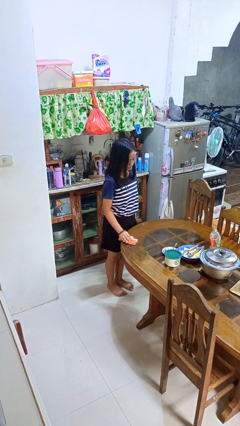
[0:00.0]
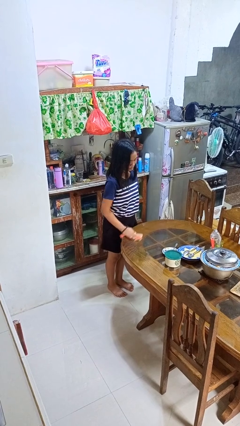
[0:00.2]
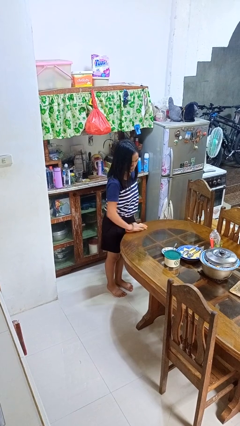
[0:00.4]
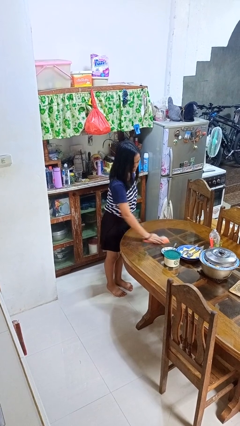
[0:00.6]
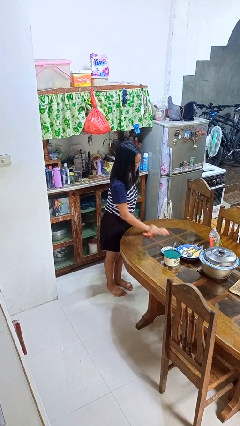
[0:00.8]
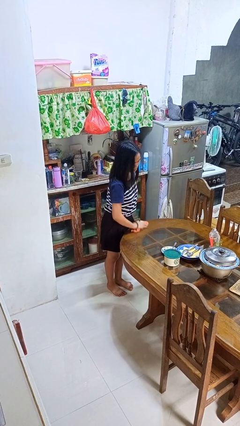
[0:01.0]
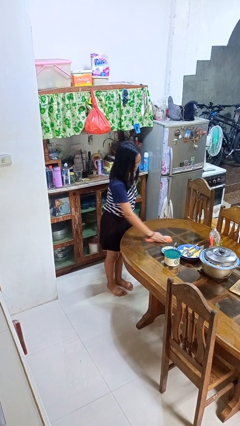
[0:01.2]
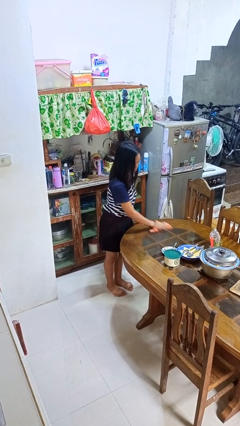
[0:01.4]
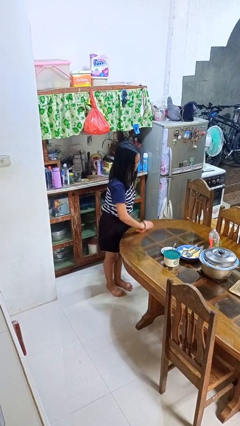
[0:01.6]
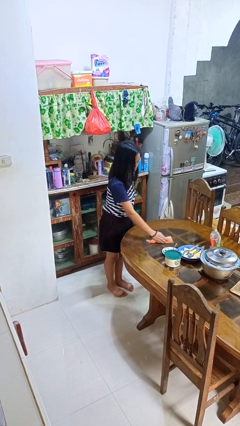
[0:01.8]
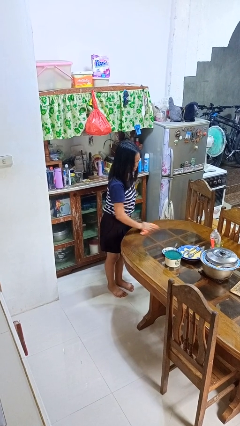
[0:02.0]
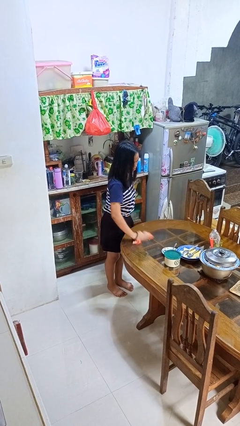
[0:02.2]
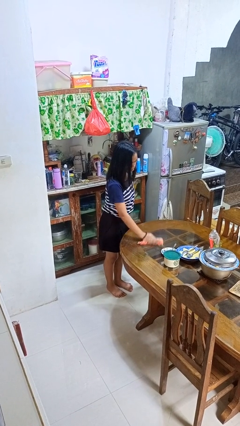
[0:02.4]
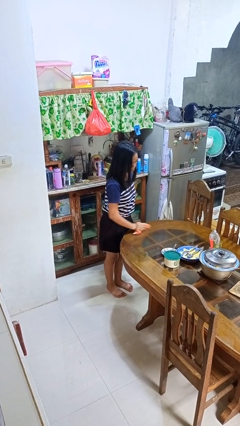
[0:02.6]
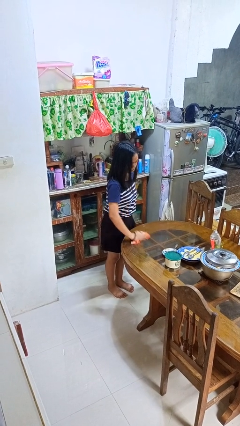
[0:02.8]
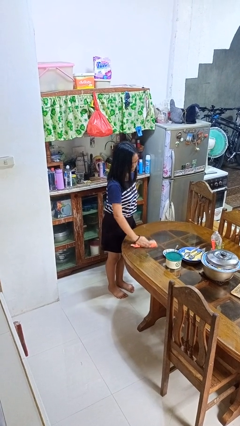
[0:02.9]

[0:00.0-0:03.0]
person cleans table with rag

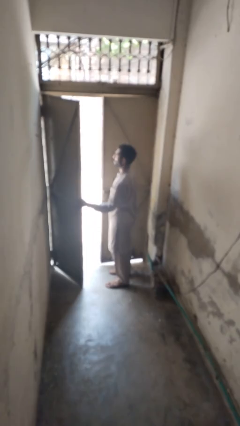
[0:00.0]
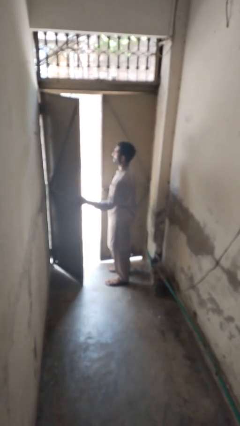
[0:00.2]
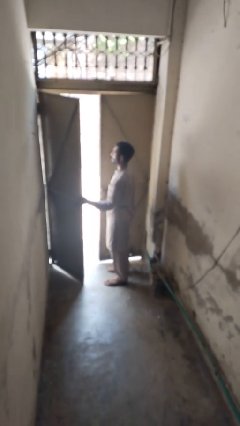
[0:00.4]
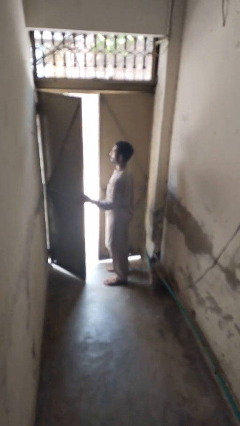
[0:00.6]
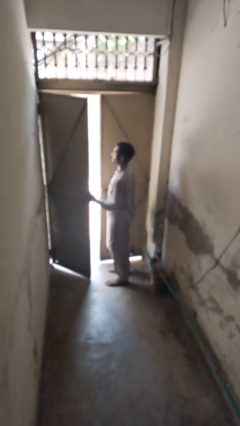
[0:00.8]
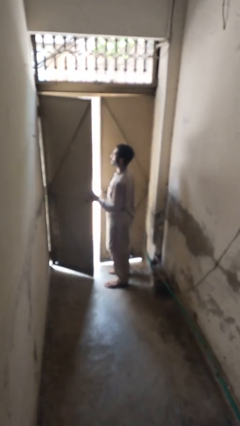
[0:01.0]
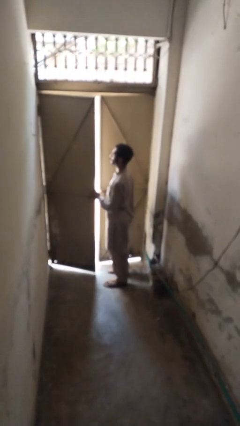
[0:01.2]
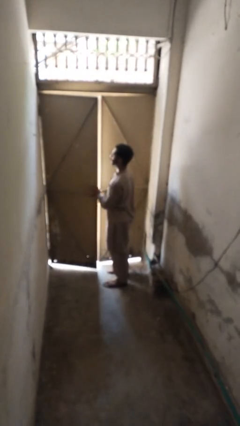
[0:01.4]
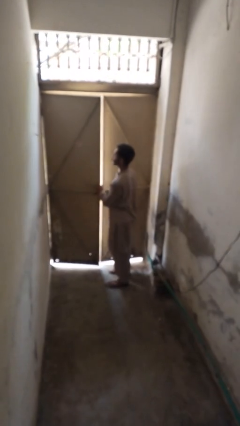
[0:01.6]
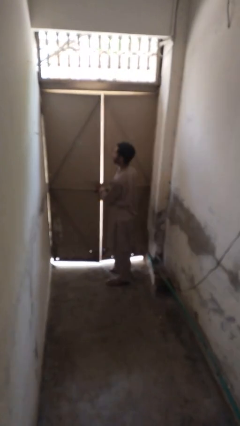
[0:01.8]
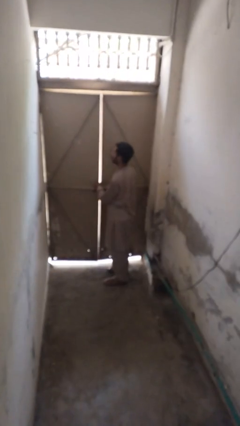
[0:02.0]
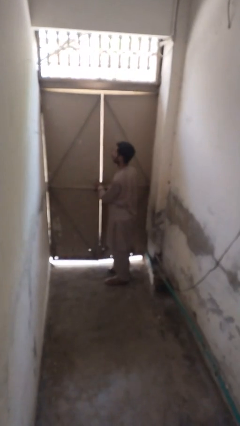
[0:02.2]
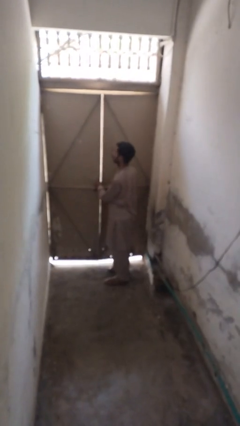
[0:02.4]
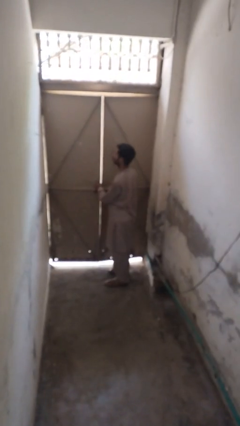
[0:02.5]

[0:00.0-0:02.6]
person closes gate

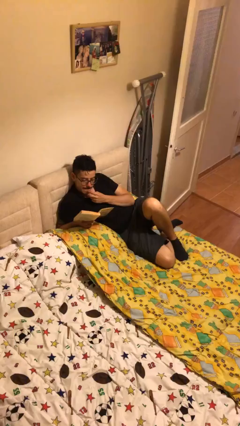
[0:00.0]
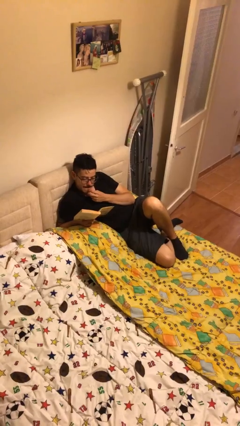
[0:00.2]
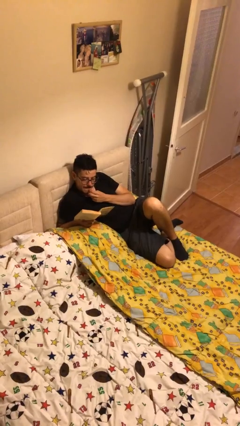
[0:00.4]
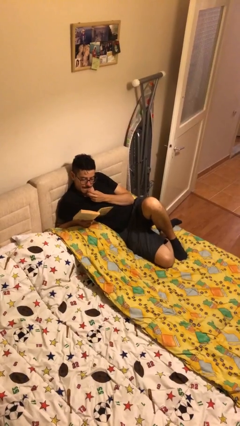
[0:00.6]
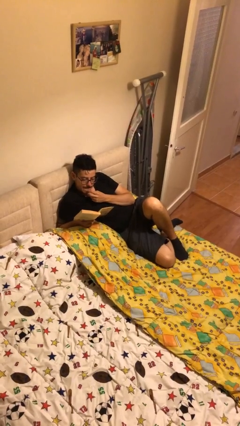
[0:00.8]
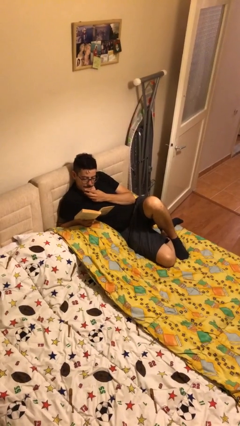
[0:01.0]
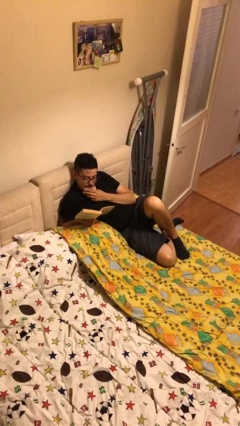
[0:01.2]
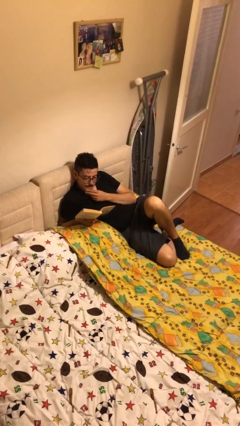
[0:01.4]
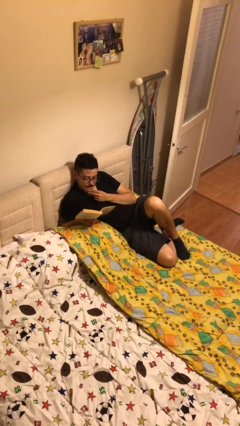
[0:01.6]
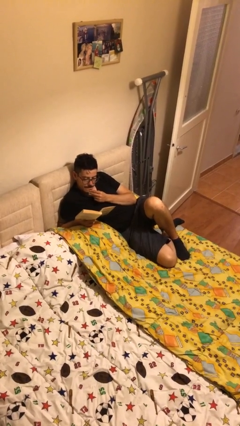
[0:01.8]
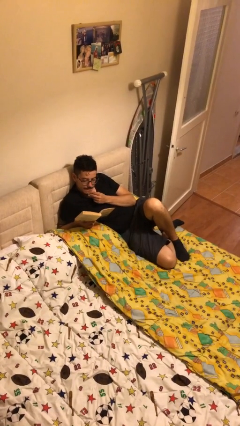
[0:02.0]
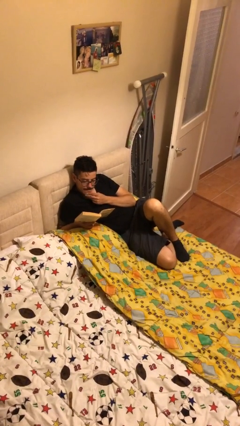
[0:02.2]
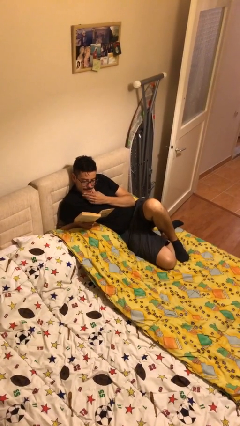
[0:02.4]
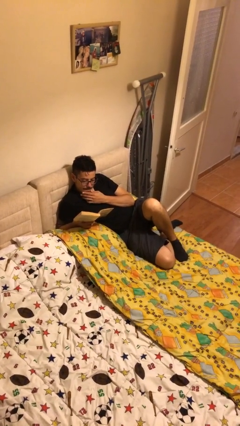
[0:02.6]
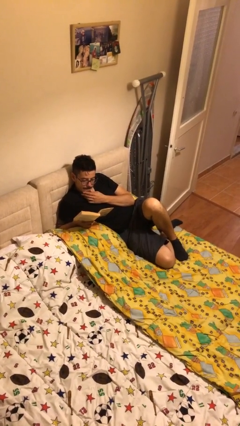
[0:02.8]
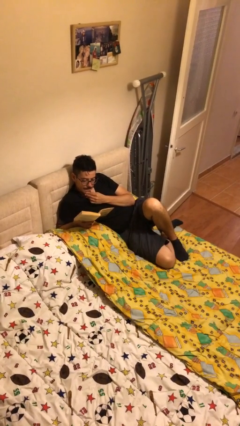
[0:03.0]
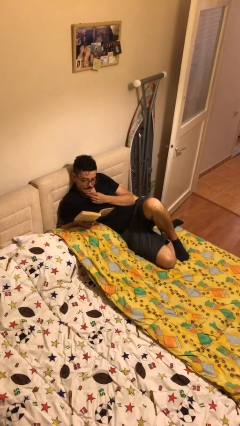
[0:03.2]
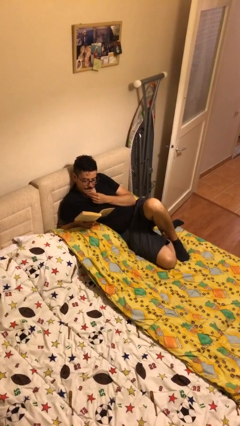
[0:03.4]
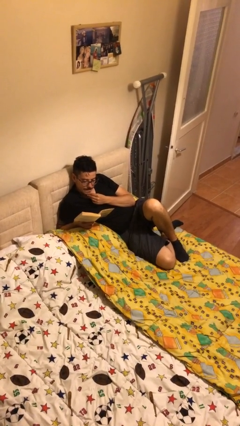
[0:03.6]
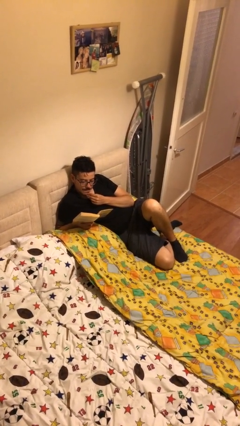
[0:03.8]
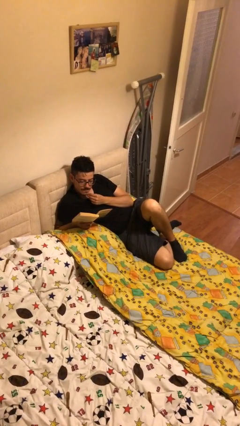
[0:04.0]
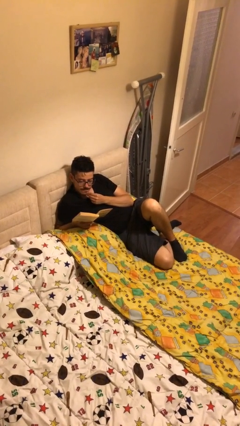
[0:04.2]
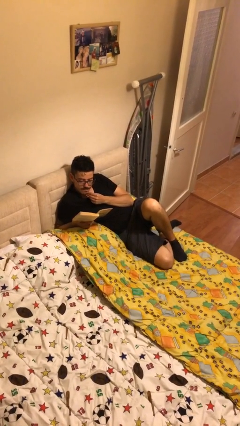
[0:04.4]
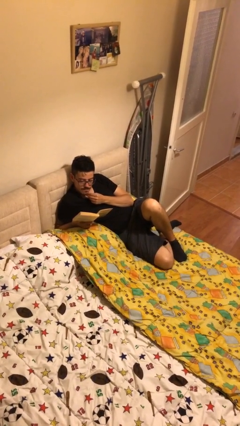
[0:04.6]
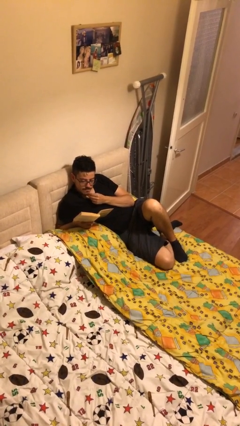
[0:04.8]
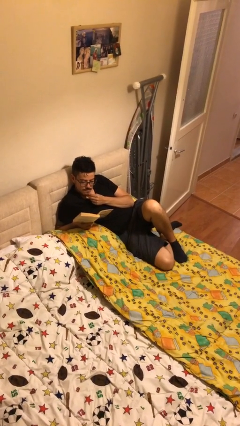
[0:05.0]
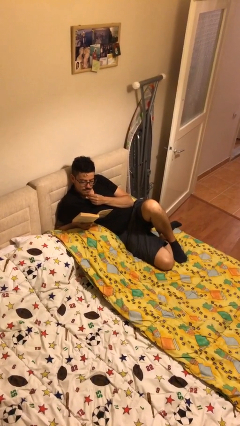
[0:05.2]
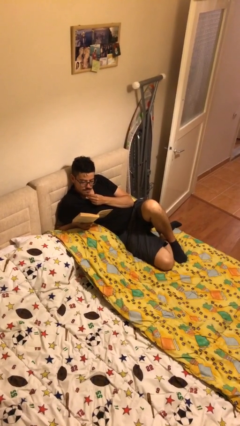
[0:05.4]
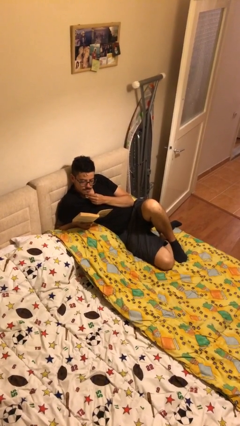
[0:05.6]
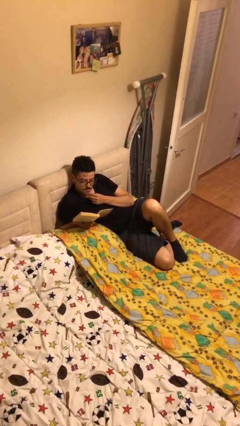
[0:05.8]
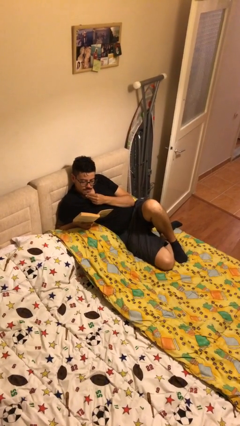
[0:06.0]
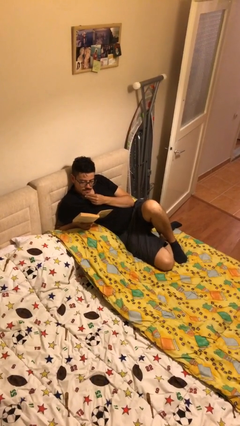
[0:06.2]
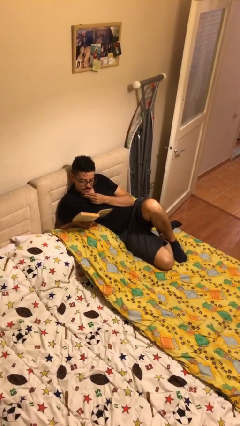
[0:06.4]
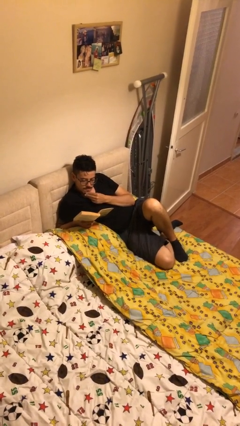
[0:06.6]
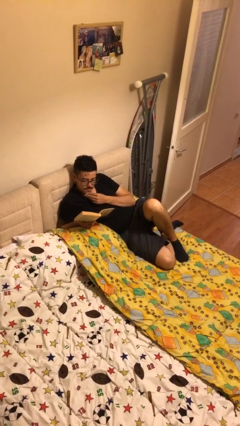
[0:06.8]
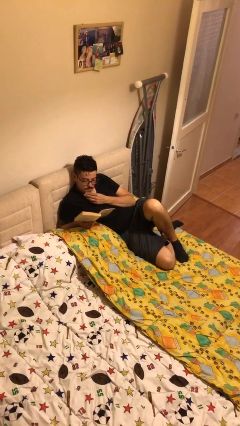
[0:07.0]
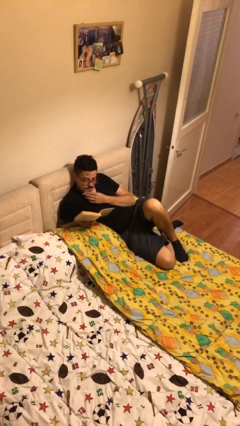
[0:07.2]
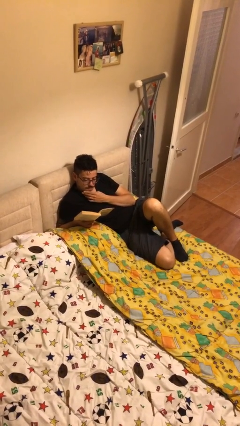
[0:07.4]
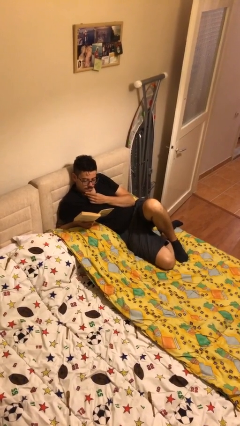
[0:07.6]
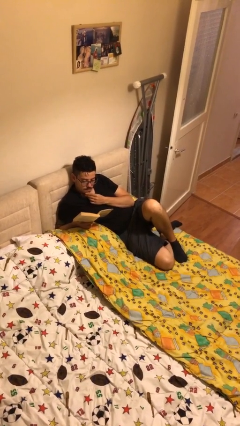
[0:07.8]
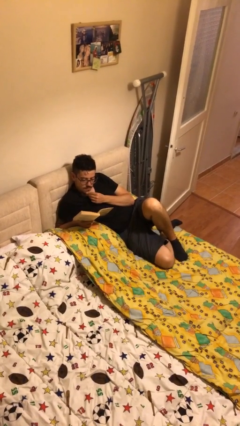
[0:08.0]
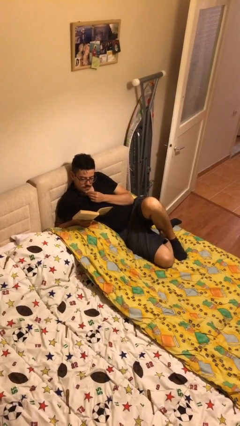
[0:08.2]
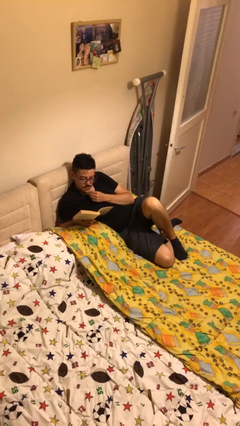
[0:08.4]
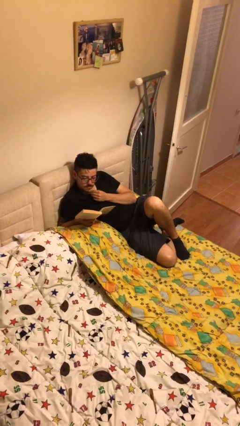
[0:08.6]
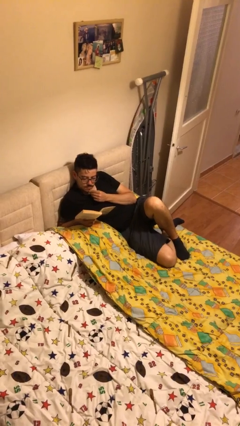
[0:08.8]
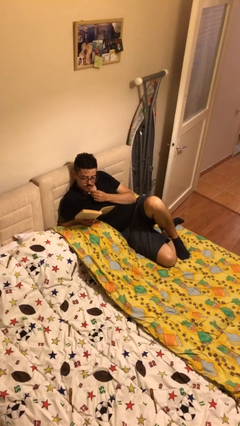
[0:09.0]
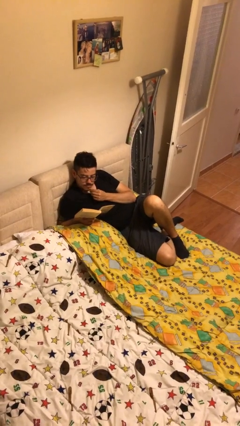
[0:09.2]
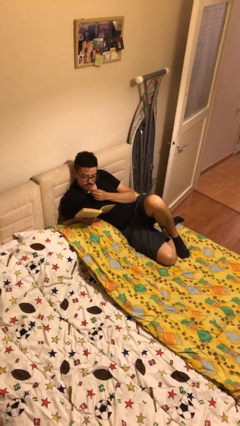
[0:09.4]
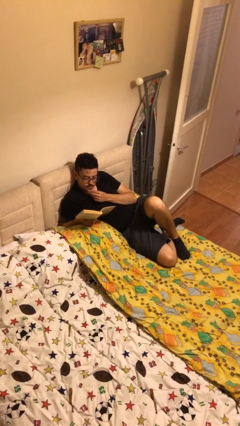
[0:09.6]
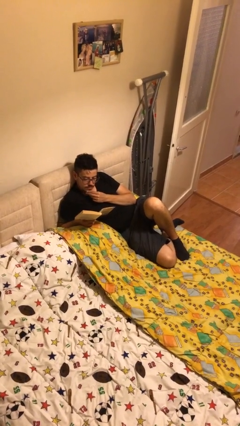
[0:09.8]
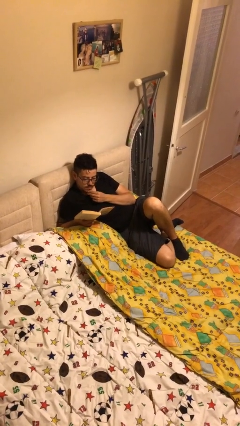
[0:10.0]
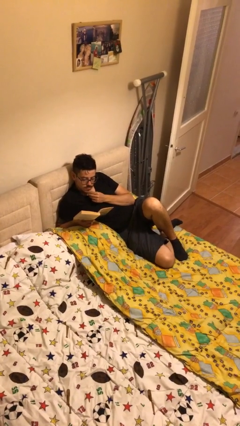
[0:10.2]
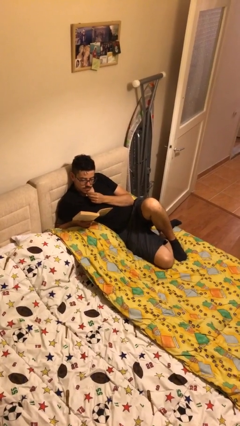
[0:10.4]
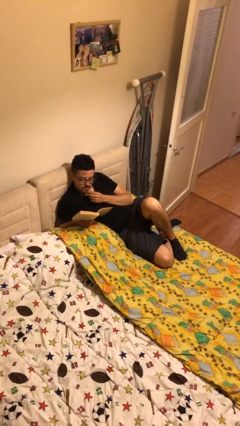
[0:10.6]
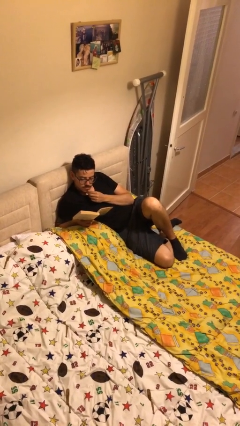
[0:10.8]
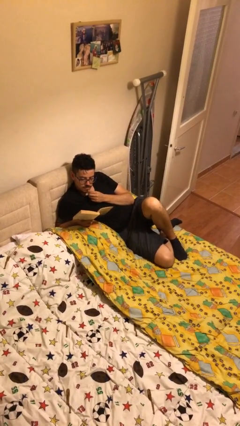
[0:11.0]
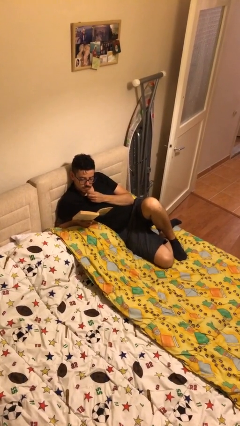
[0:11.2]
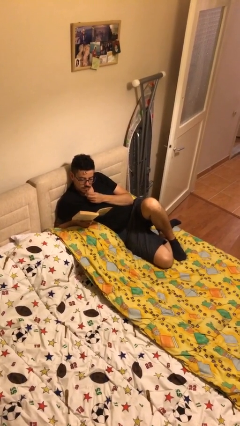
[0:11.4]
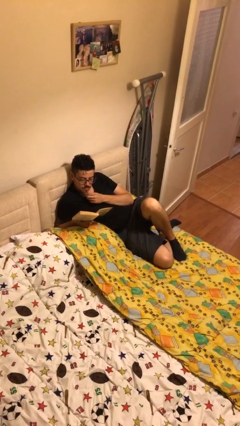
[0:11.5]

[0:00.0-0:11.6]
person reads document

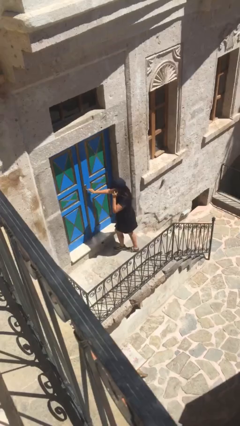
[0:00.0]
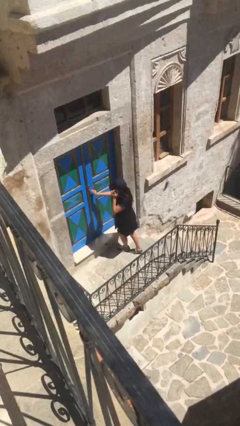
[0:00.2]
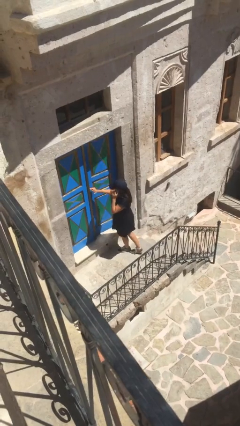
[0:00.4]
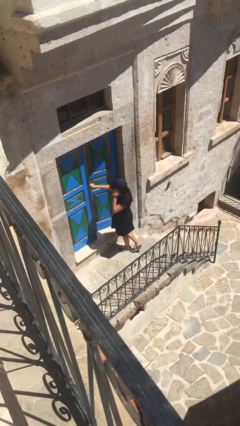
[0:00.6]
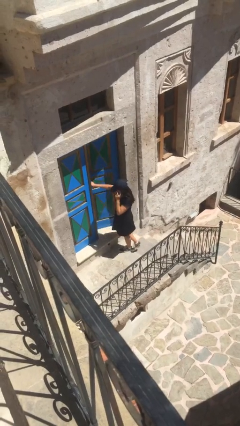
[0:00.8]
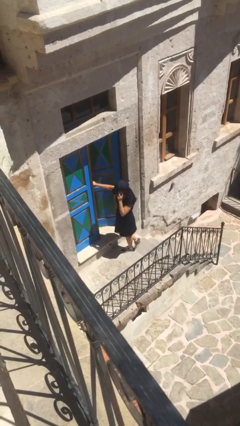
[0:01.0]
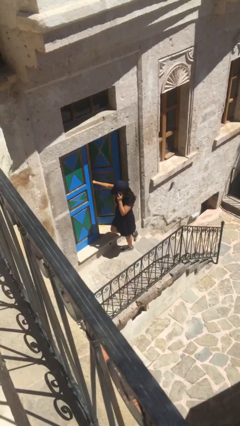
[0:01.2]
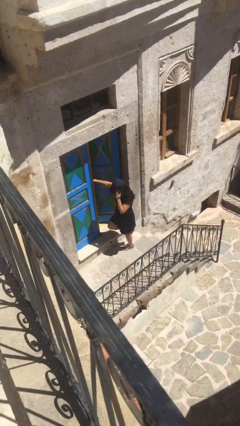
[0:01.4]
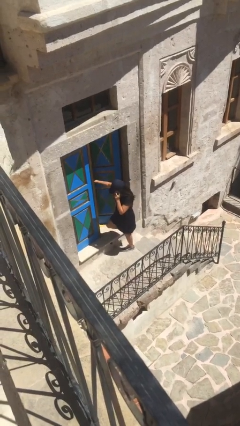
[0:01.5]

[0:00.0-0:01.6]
person opens facility door
